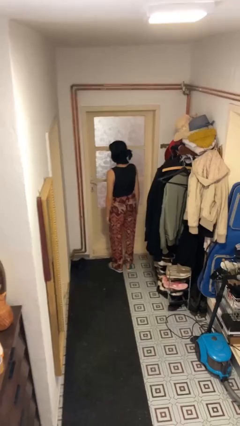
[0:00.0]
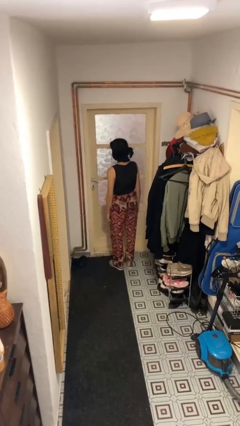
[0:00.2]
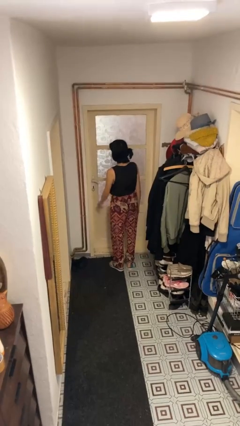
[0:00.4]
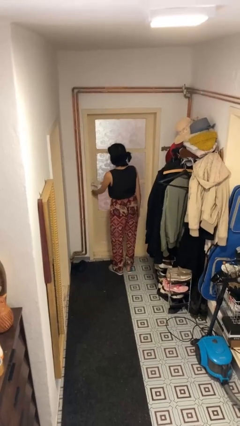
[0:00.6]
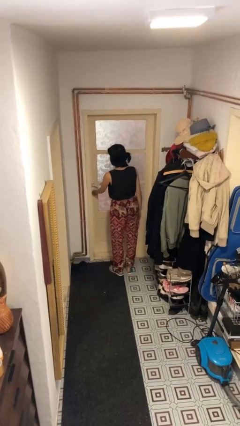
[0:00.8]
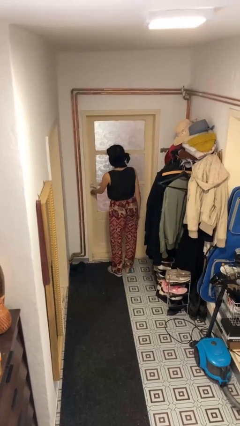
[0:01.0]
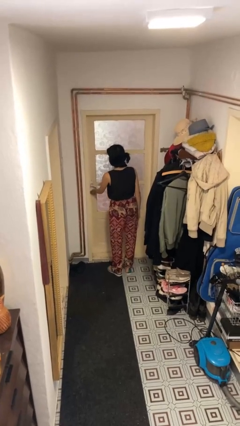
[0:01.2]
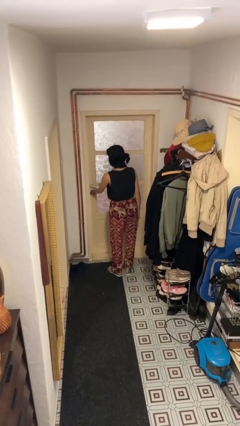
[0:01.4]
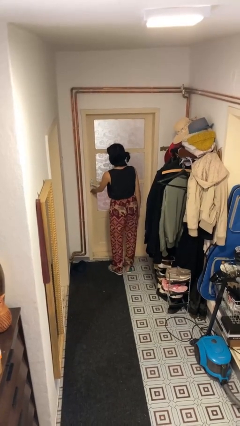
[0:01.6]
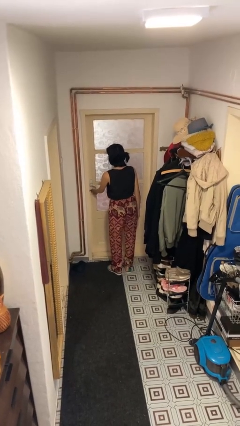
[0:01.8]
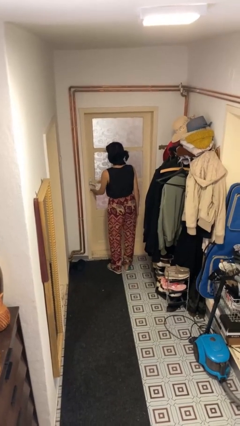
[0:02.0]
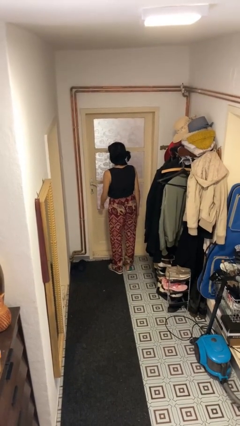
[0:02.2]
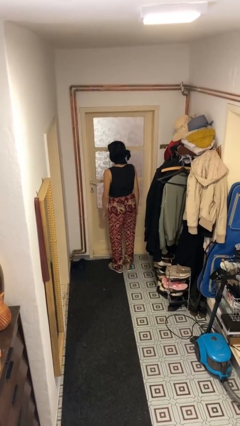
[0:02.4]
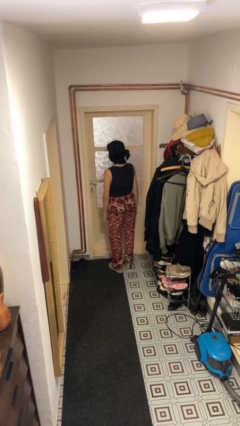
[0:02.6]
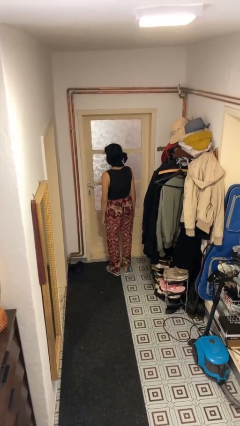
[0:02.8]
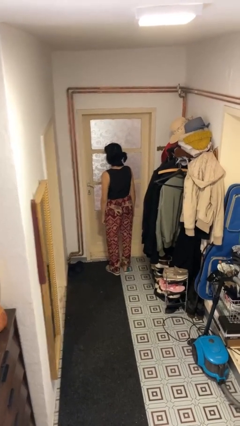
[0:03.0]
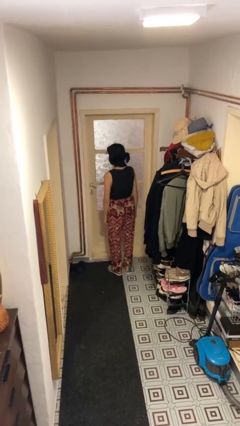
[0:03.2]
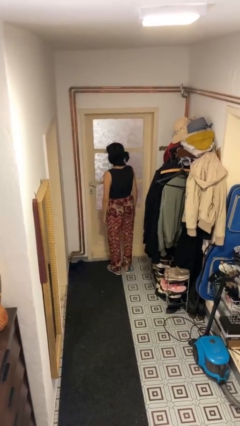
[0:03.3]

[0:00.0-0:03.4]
person unlocks door with keys

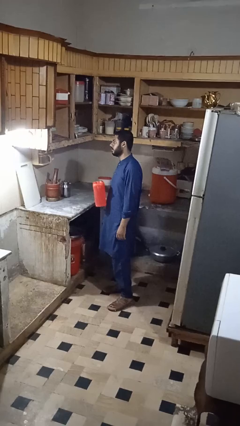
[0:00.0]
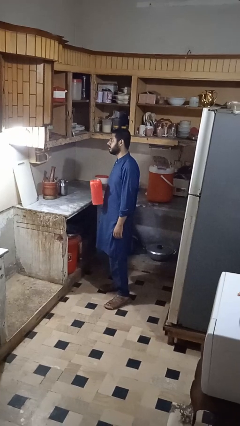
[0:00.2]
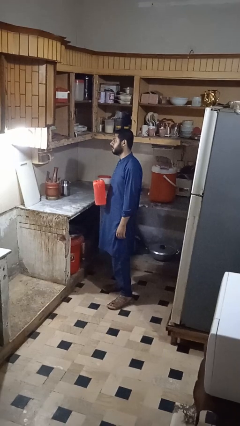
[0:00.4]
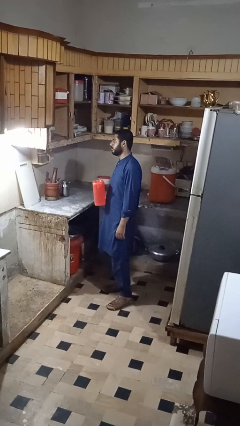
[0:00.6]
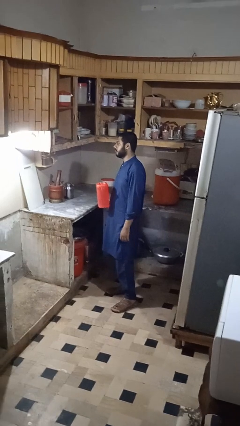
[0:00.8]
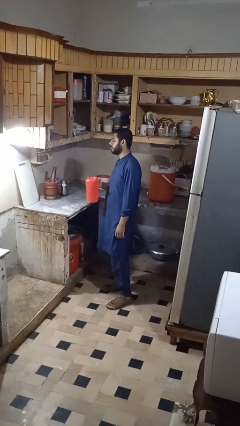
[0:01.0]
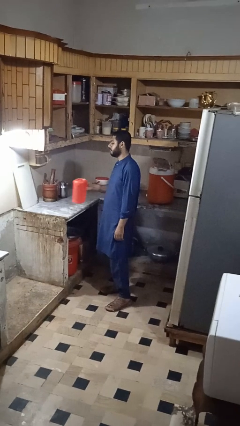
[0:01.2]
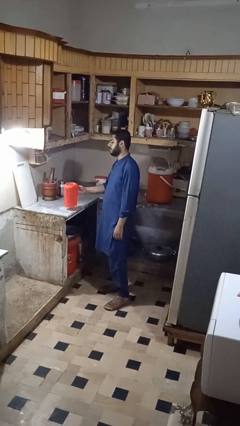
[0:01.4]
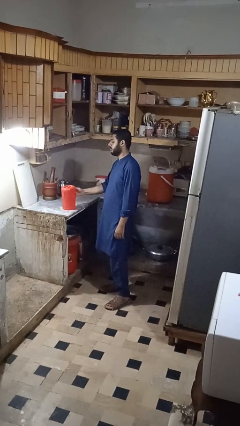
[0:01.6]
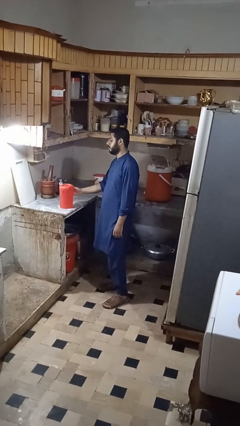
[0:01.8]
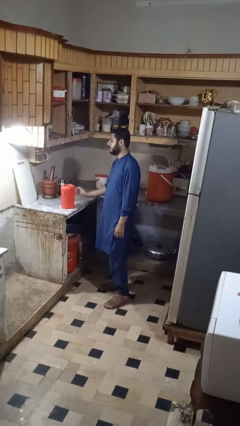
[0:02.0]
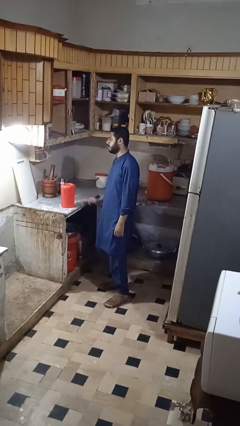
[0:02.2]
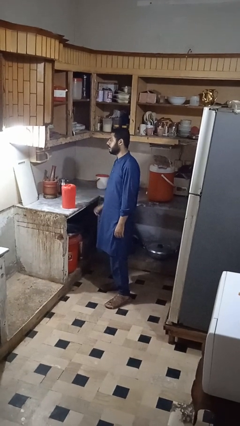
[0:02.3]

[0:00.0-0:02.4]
person puts down object on countertop

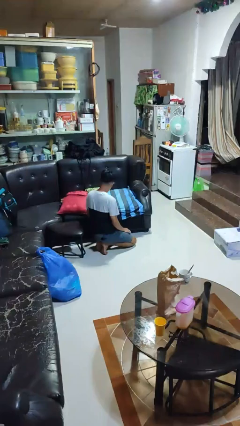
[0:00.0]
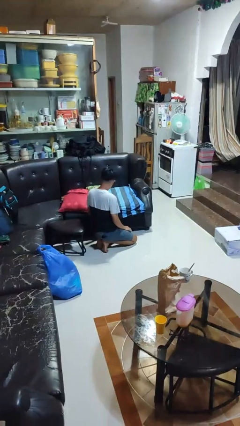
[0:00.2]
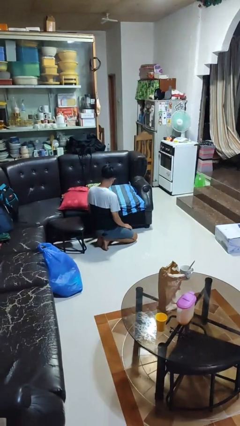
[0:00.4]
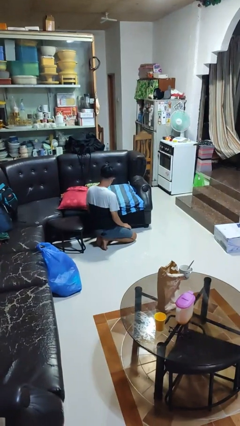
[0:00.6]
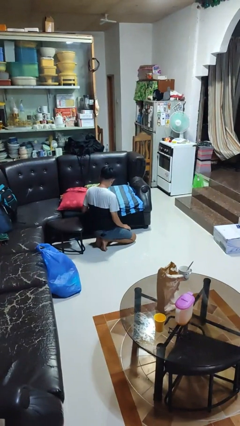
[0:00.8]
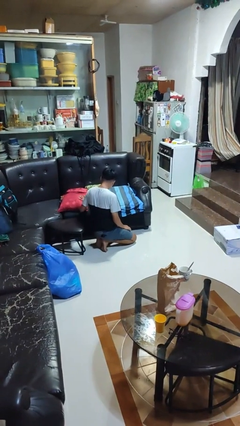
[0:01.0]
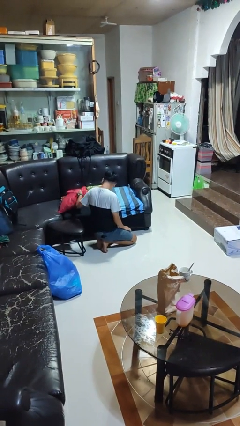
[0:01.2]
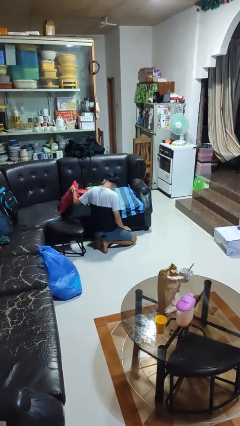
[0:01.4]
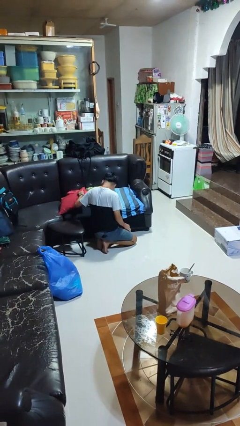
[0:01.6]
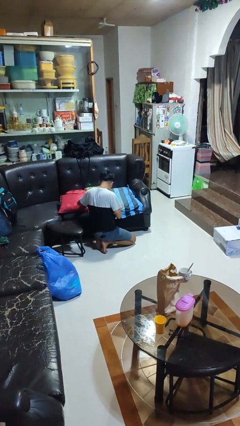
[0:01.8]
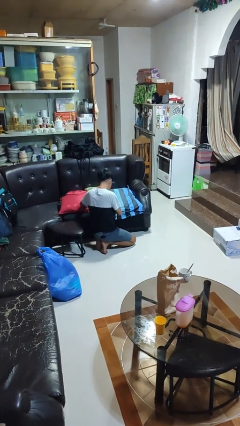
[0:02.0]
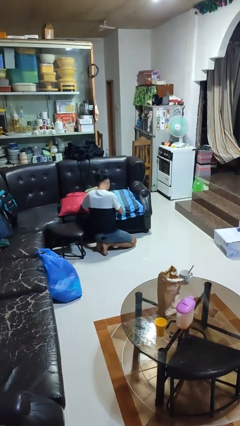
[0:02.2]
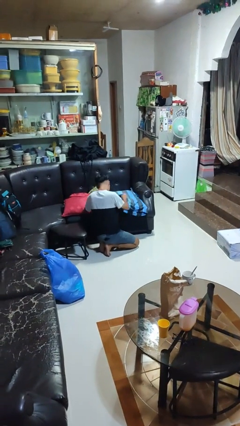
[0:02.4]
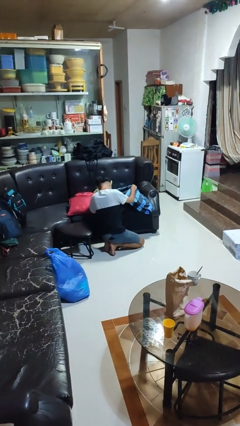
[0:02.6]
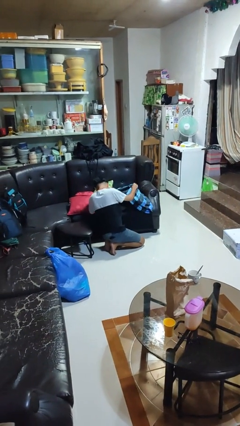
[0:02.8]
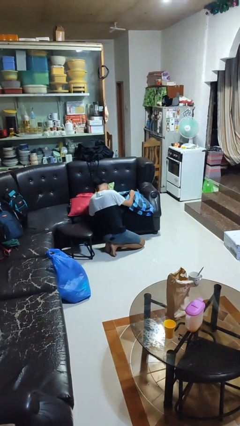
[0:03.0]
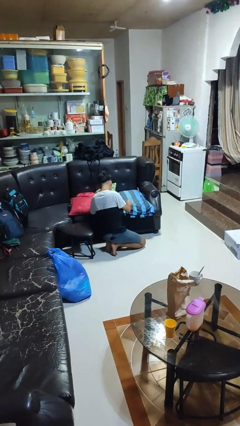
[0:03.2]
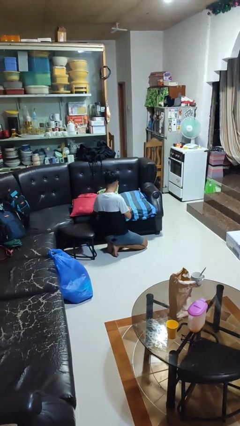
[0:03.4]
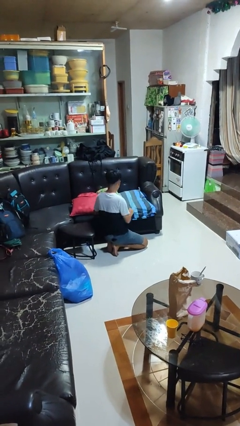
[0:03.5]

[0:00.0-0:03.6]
person searches in couch

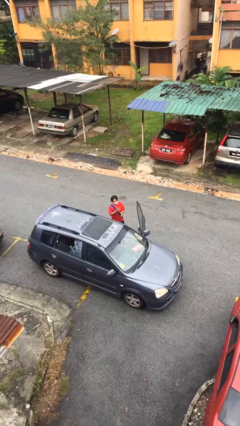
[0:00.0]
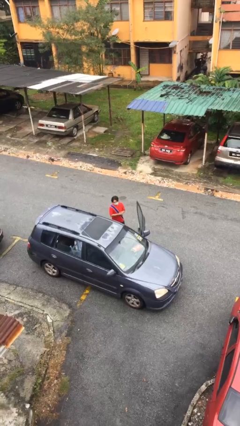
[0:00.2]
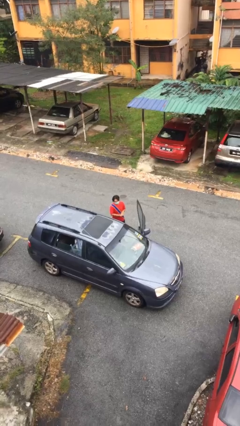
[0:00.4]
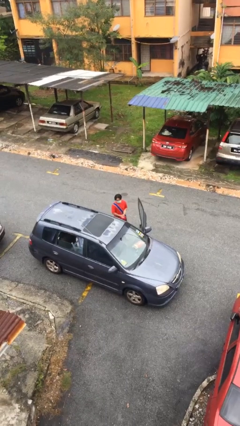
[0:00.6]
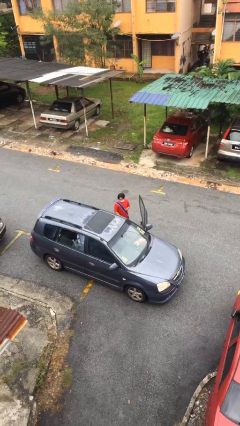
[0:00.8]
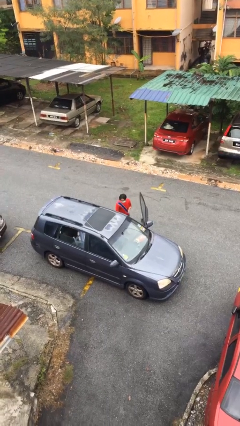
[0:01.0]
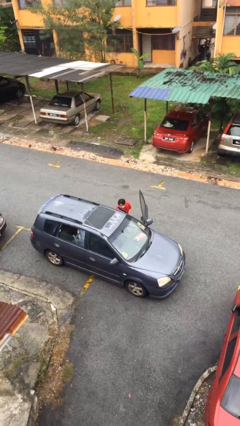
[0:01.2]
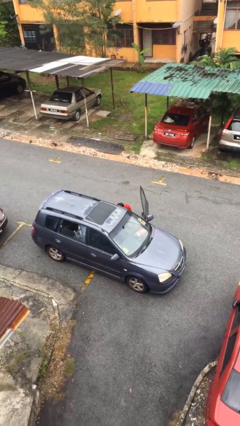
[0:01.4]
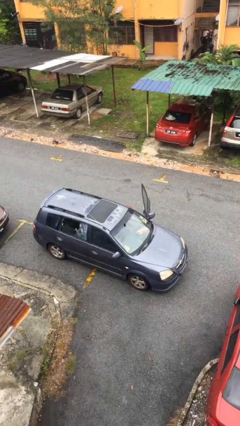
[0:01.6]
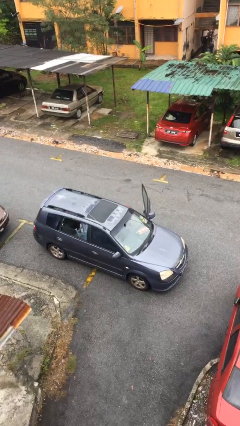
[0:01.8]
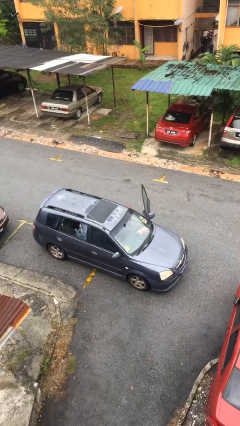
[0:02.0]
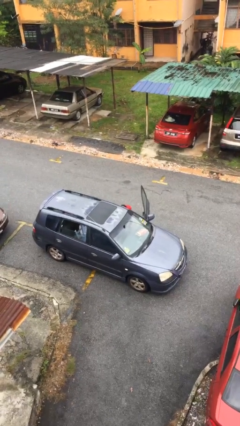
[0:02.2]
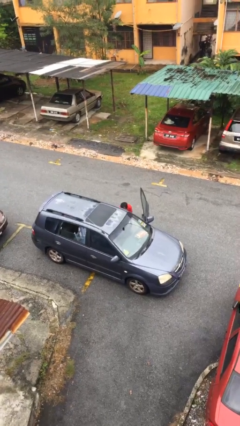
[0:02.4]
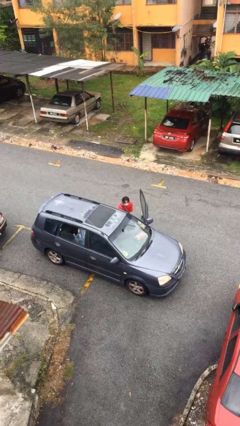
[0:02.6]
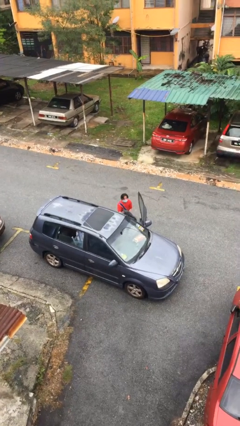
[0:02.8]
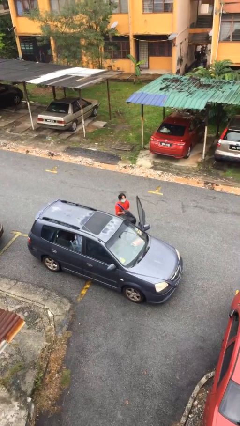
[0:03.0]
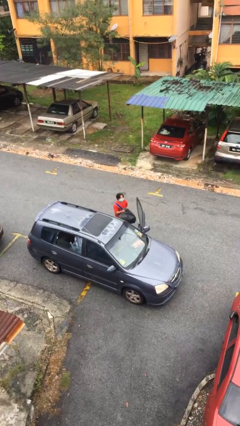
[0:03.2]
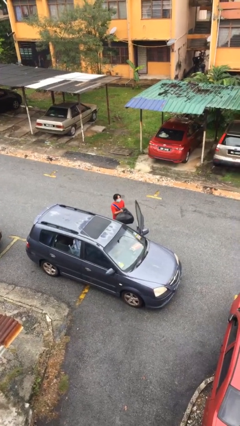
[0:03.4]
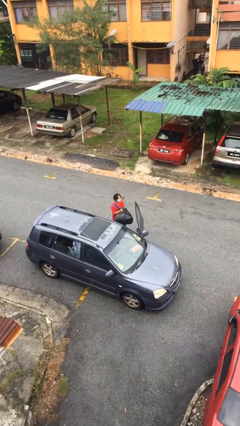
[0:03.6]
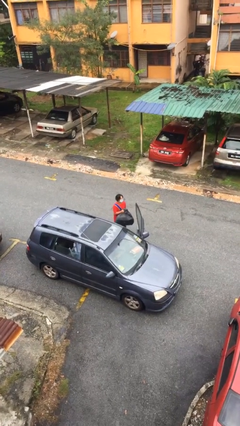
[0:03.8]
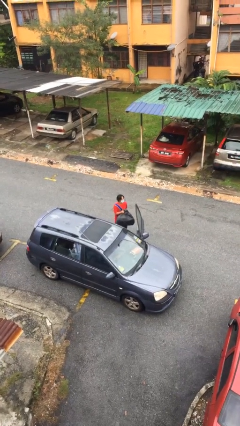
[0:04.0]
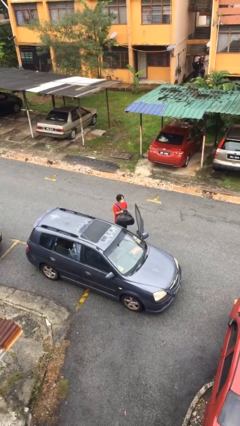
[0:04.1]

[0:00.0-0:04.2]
person unloads car

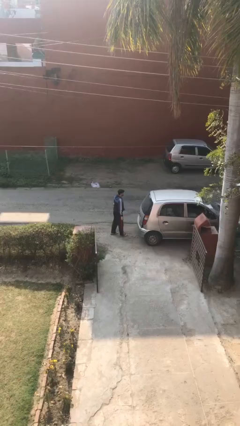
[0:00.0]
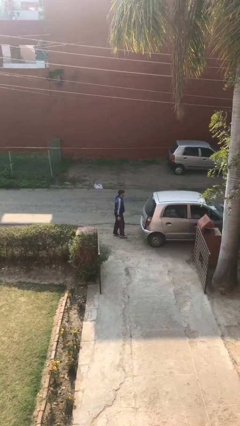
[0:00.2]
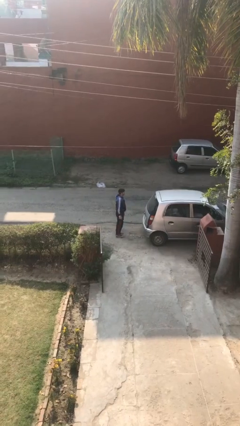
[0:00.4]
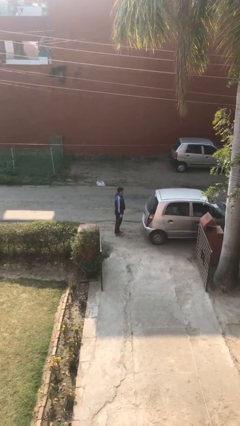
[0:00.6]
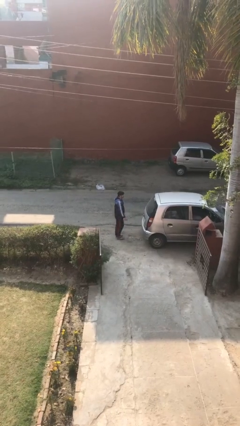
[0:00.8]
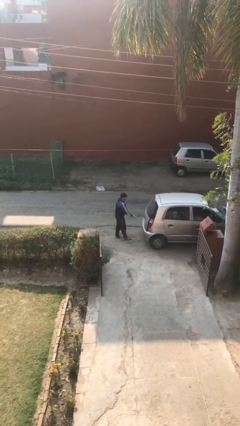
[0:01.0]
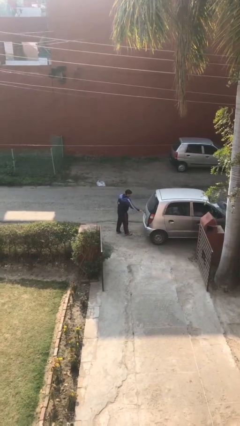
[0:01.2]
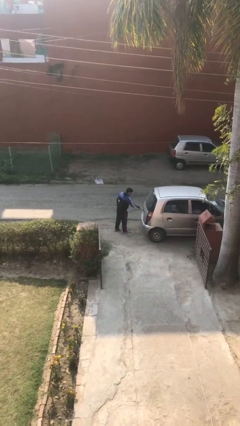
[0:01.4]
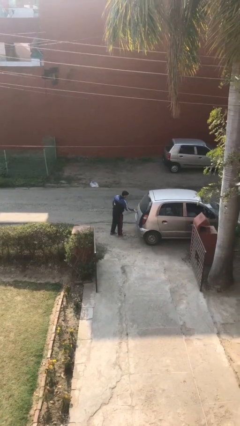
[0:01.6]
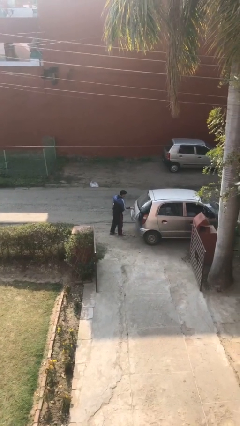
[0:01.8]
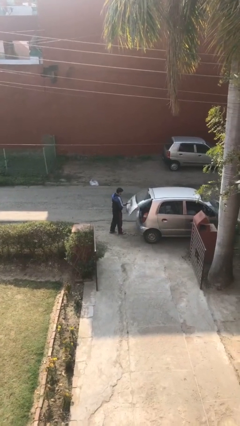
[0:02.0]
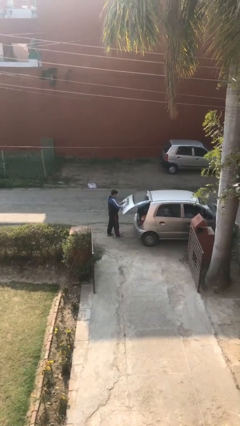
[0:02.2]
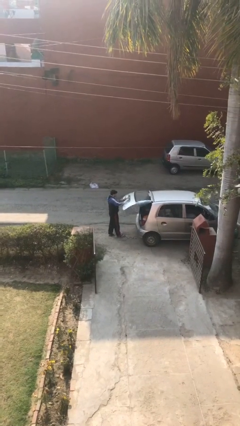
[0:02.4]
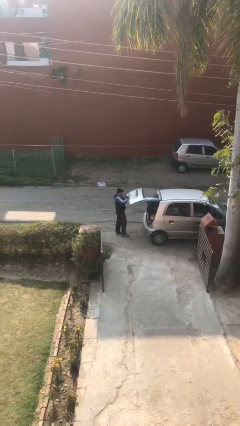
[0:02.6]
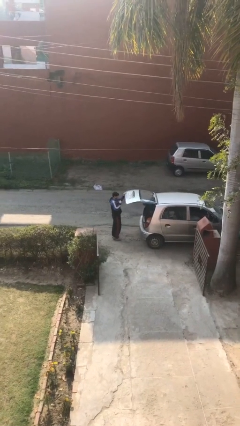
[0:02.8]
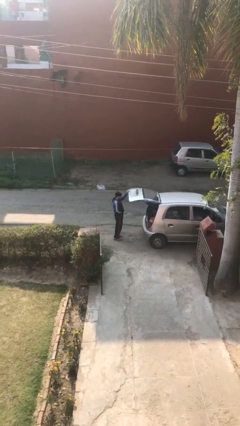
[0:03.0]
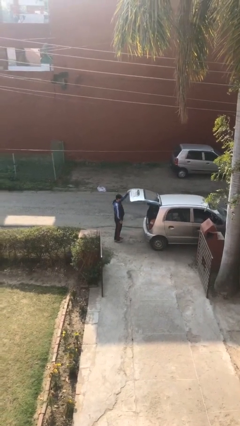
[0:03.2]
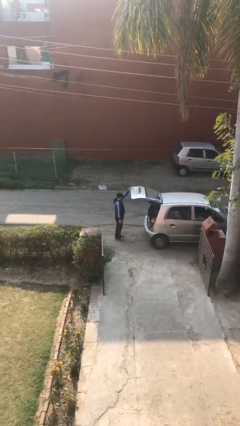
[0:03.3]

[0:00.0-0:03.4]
person opens car trunk

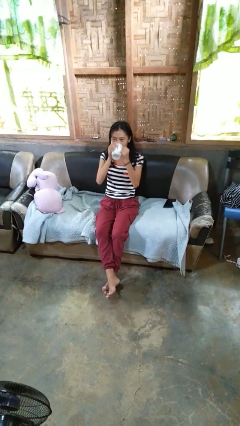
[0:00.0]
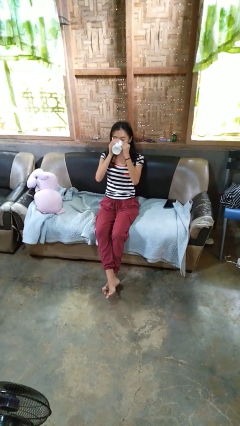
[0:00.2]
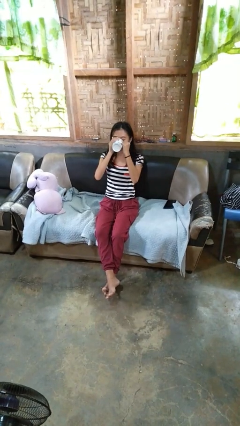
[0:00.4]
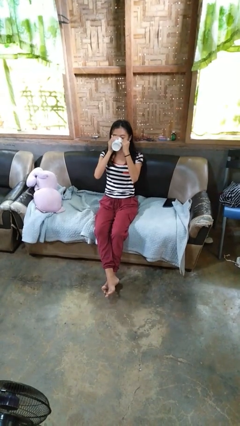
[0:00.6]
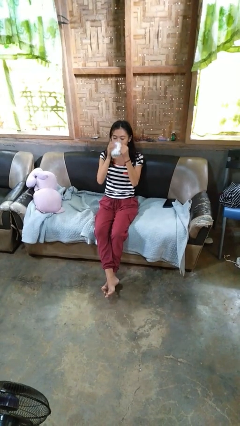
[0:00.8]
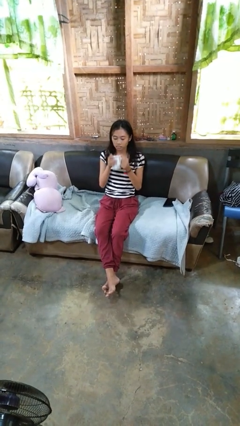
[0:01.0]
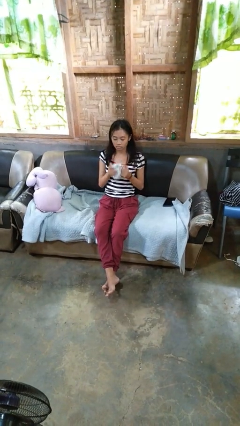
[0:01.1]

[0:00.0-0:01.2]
person drinks from mug
